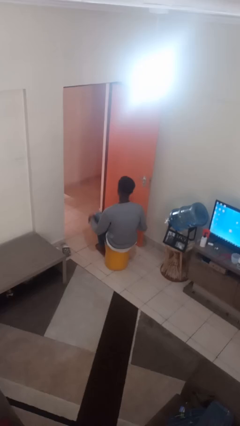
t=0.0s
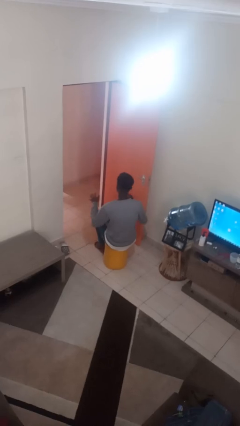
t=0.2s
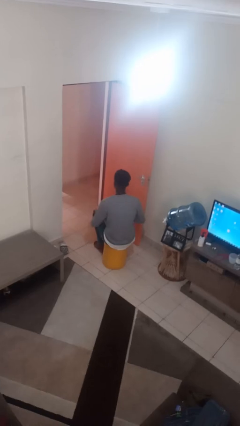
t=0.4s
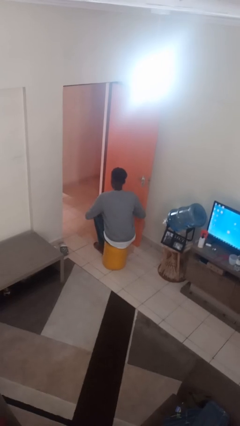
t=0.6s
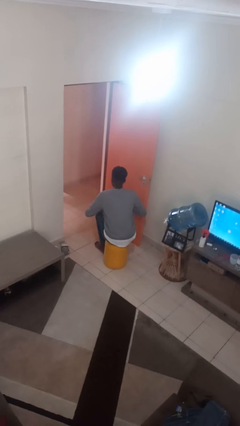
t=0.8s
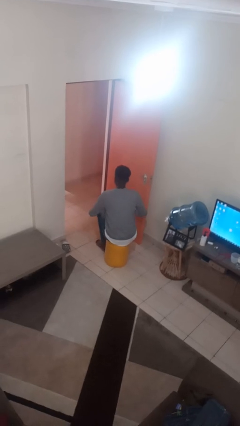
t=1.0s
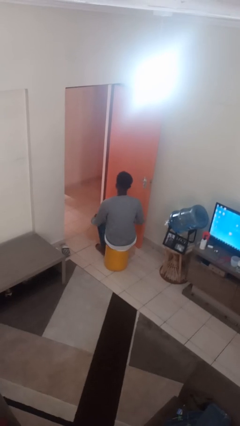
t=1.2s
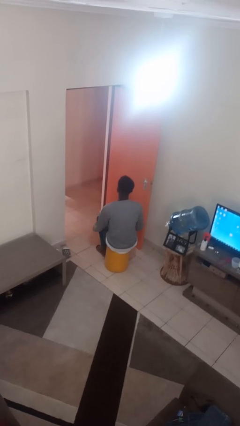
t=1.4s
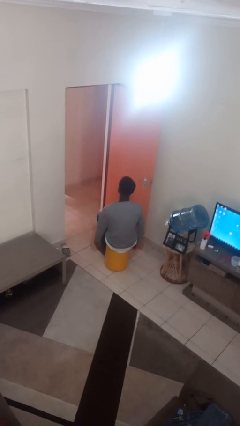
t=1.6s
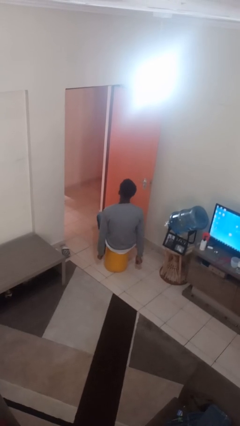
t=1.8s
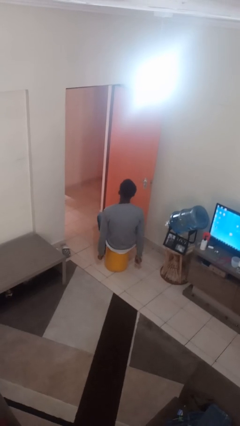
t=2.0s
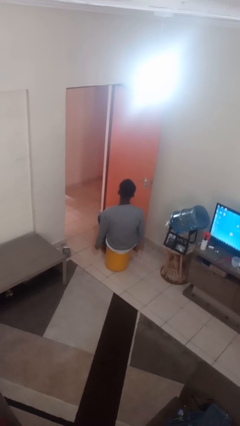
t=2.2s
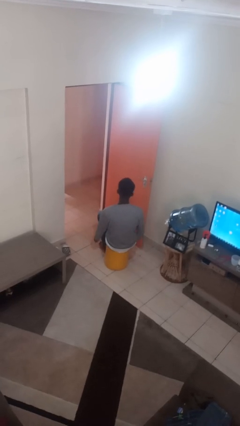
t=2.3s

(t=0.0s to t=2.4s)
person slaps hands on thighs

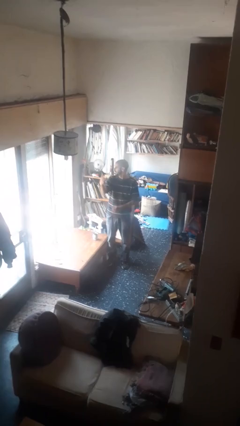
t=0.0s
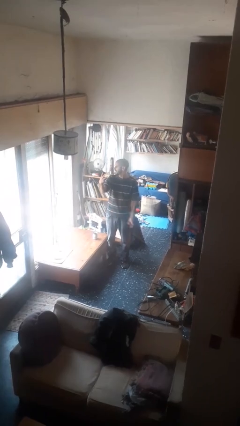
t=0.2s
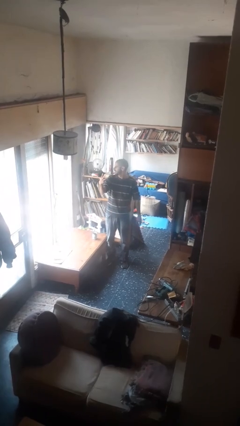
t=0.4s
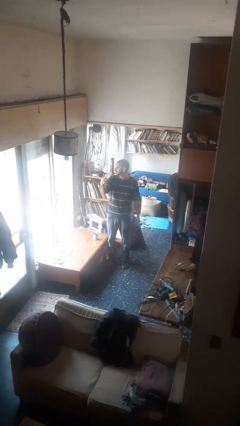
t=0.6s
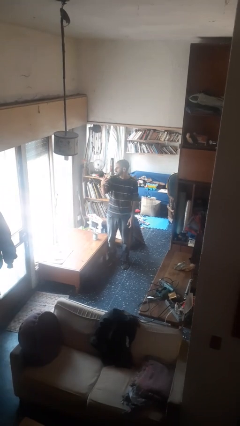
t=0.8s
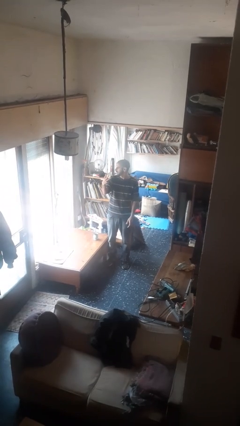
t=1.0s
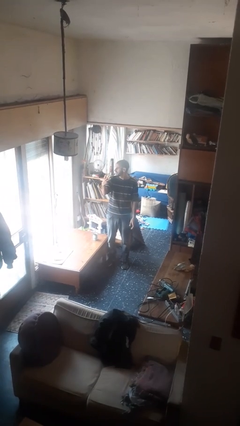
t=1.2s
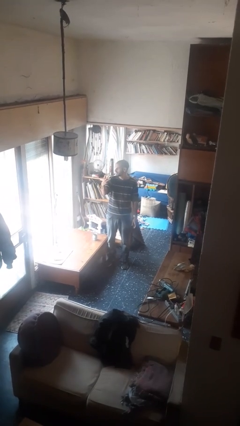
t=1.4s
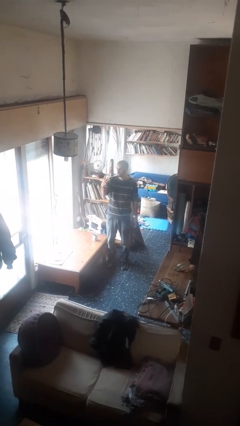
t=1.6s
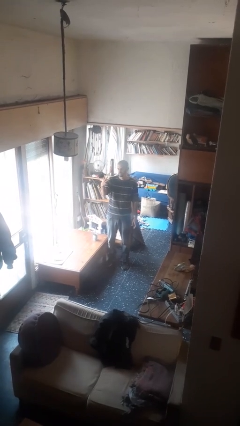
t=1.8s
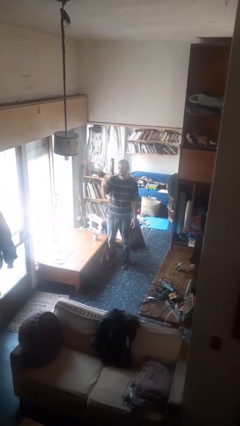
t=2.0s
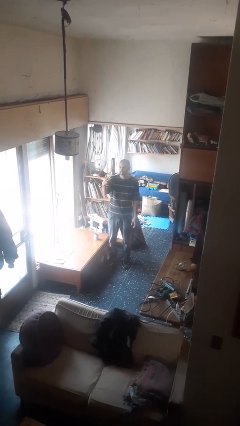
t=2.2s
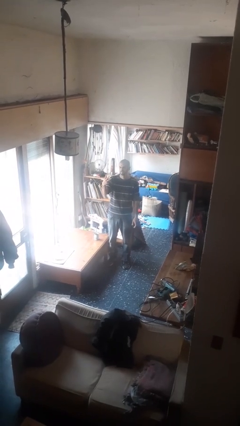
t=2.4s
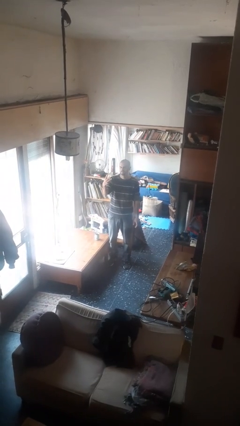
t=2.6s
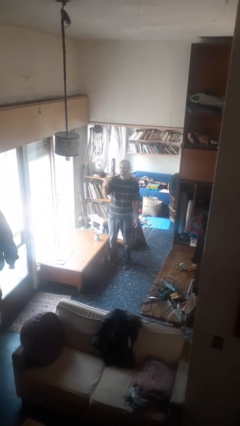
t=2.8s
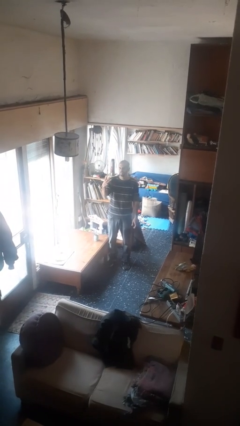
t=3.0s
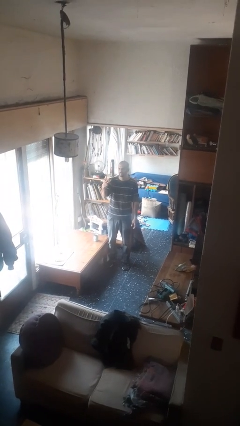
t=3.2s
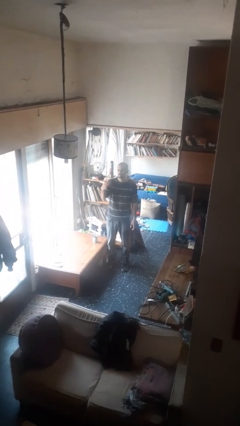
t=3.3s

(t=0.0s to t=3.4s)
person gestures number three

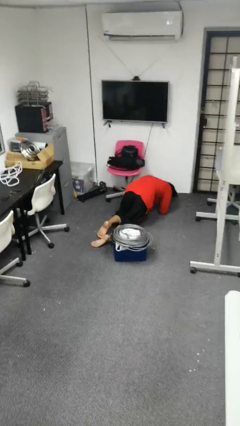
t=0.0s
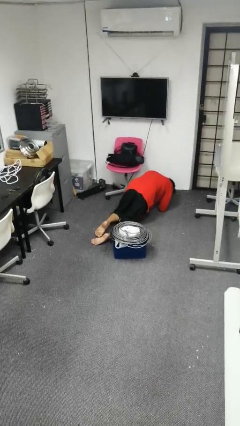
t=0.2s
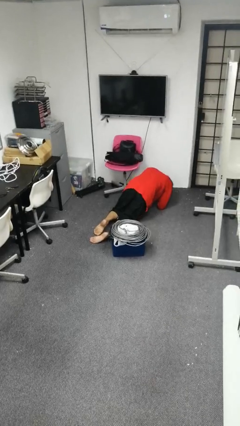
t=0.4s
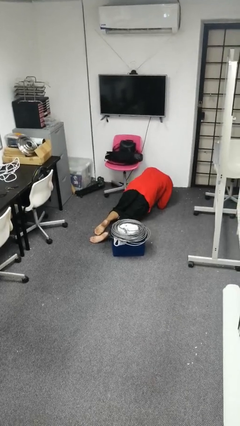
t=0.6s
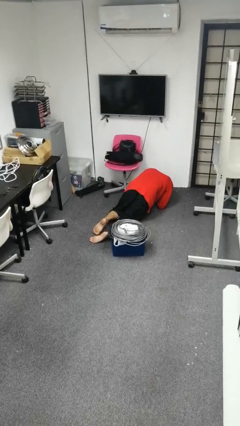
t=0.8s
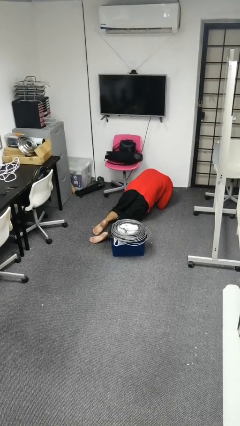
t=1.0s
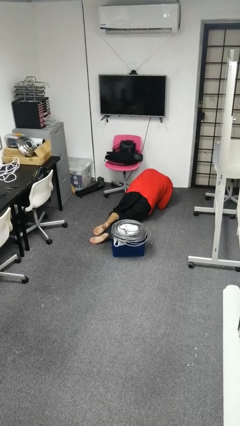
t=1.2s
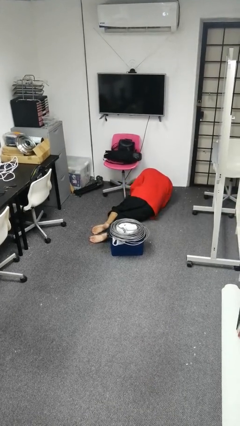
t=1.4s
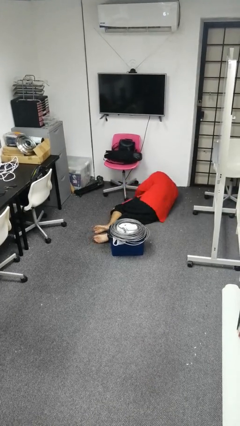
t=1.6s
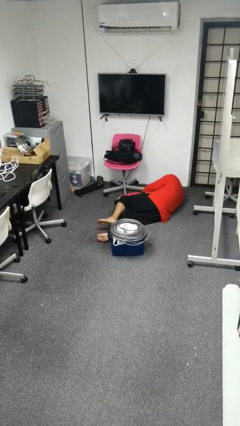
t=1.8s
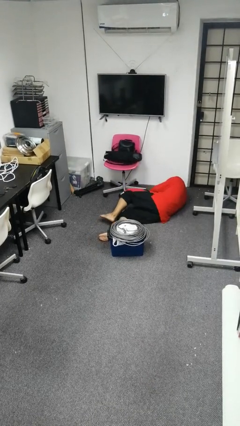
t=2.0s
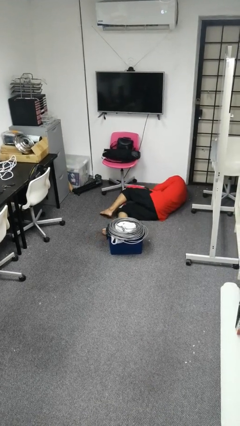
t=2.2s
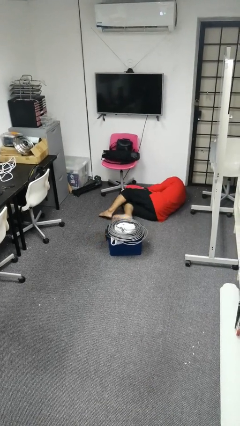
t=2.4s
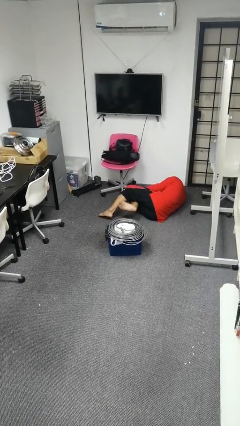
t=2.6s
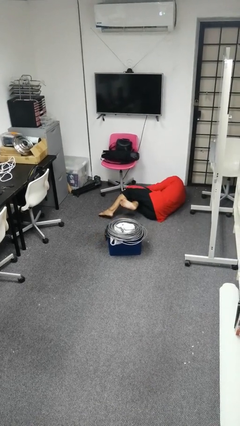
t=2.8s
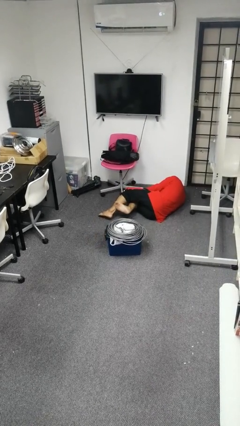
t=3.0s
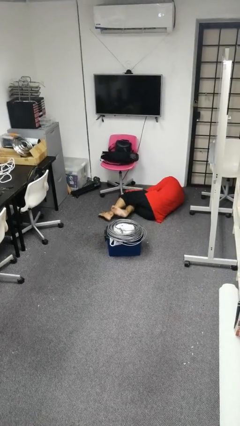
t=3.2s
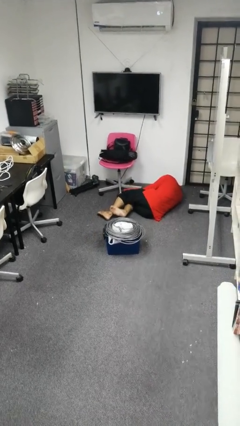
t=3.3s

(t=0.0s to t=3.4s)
person lies down on floor

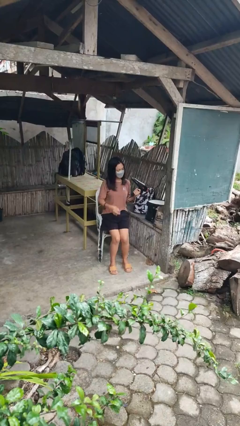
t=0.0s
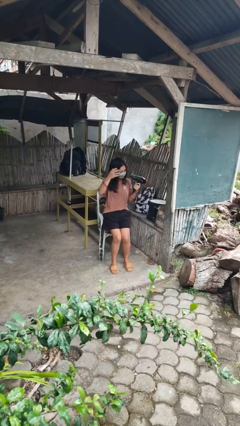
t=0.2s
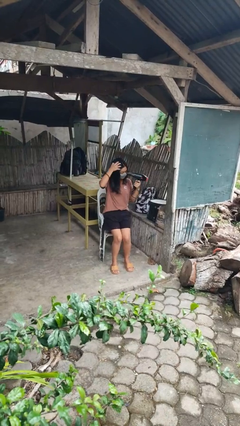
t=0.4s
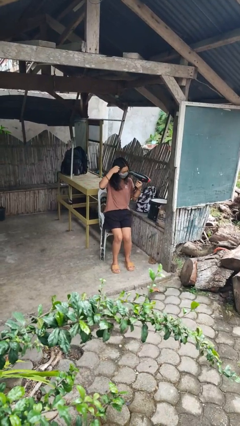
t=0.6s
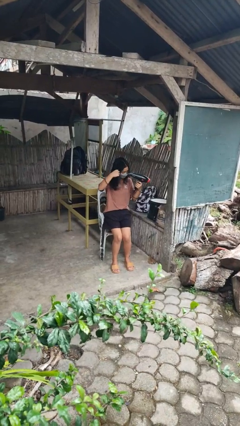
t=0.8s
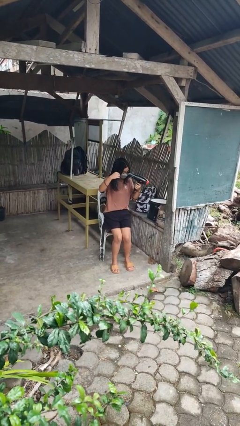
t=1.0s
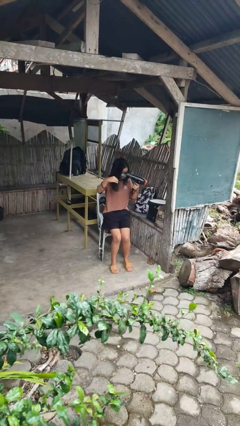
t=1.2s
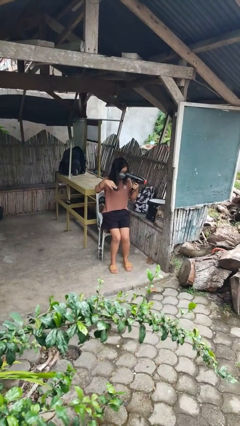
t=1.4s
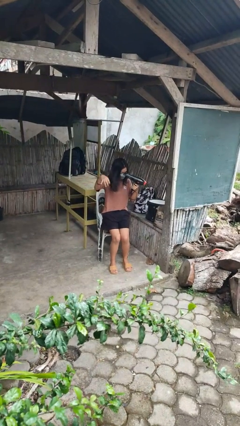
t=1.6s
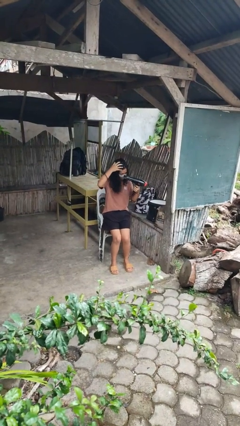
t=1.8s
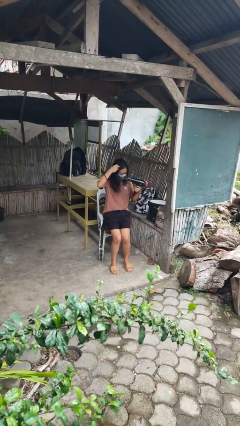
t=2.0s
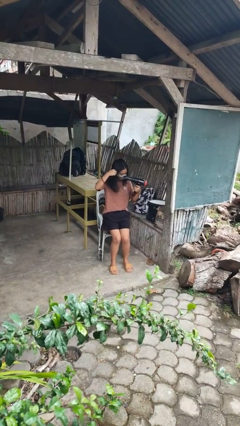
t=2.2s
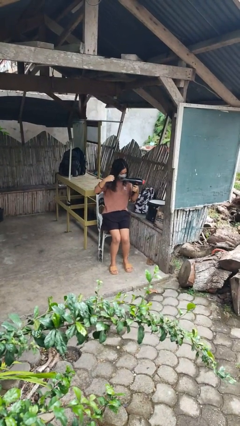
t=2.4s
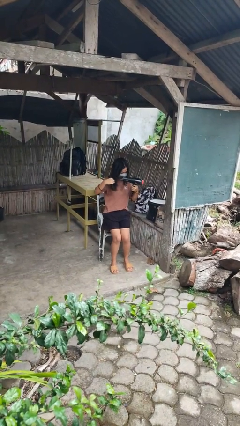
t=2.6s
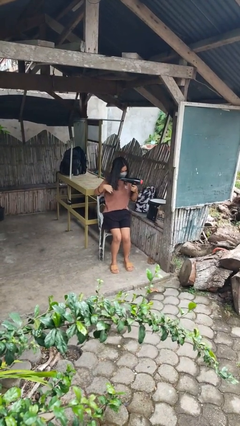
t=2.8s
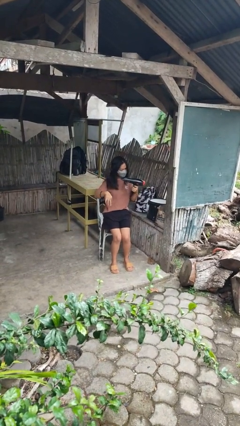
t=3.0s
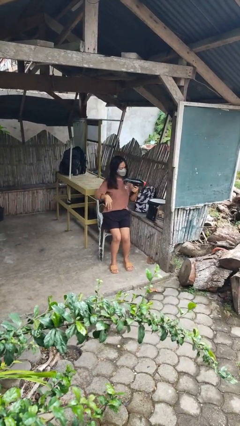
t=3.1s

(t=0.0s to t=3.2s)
person dries hair with hairdryer

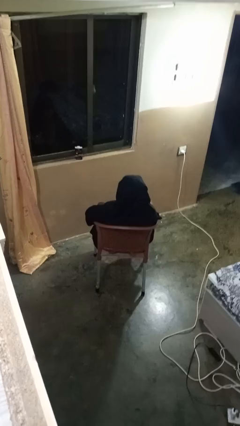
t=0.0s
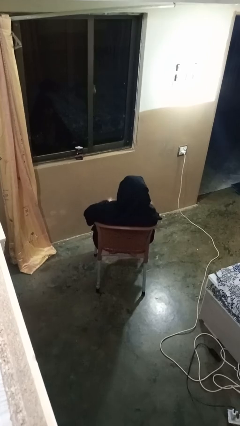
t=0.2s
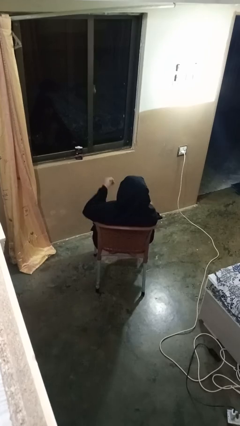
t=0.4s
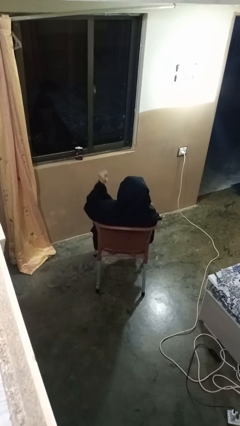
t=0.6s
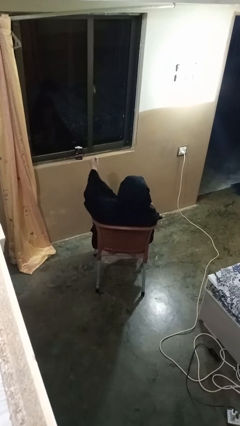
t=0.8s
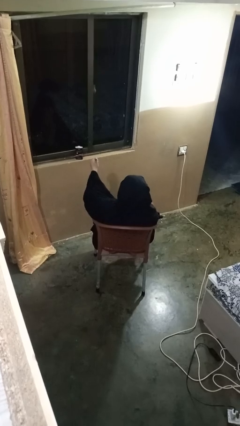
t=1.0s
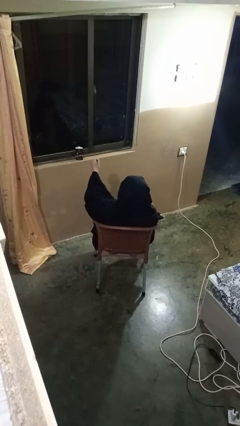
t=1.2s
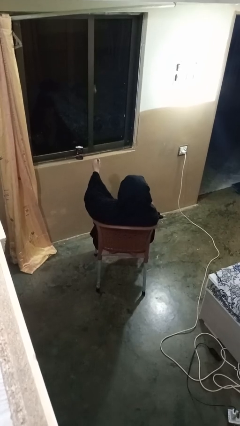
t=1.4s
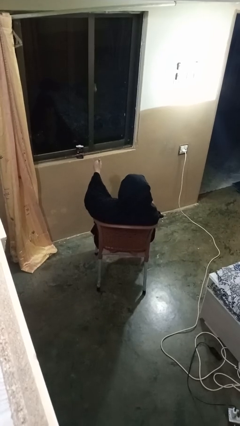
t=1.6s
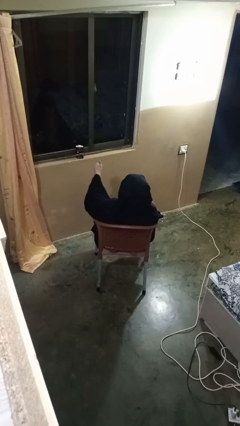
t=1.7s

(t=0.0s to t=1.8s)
person gestures thumbs up

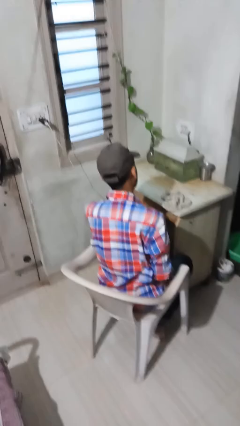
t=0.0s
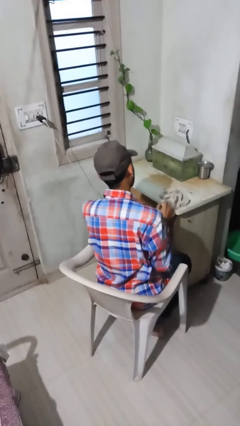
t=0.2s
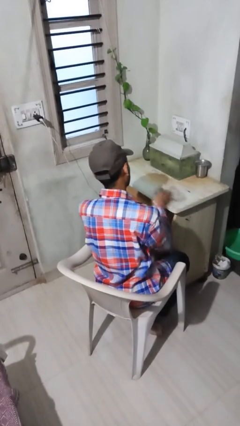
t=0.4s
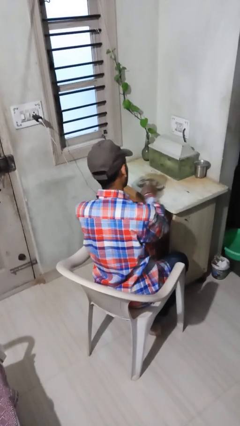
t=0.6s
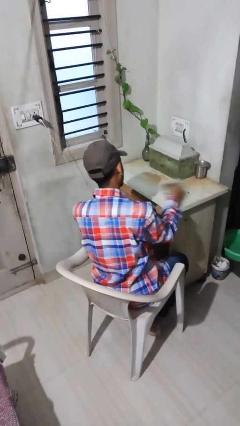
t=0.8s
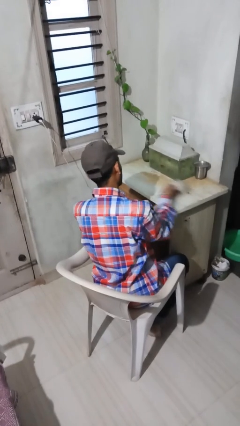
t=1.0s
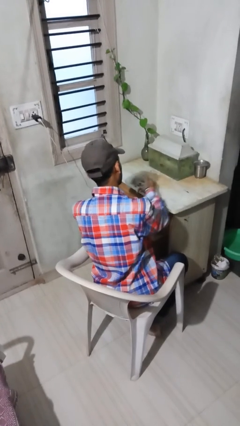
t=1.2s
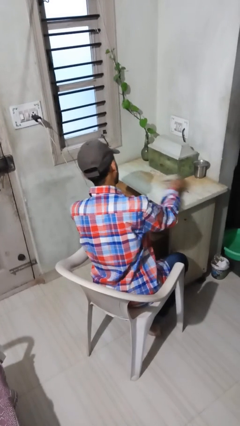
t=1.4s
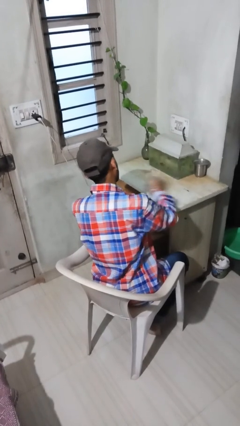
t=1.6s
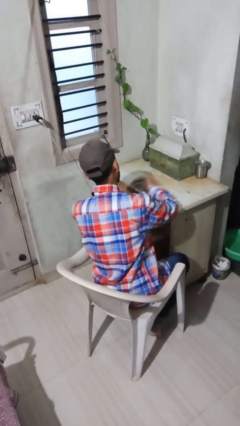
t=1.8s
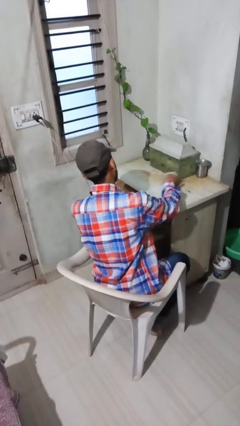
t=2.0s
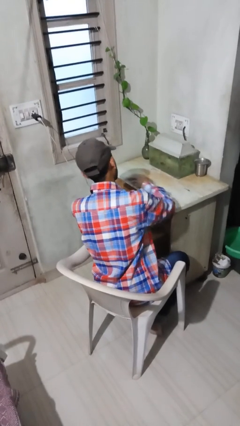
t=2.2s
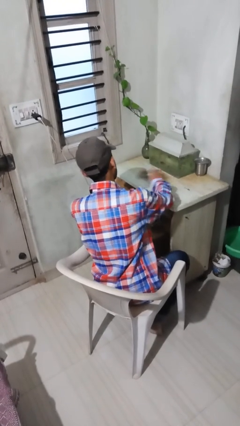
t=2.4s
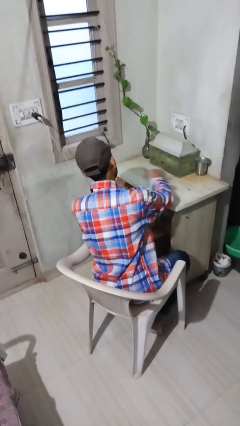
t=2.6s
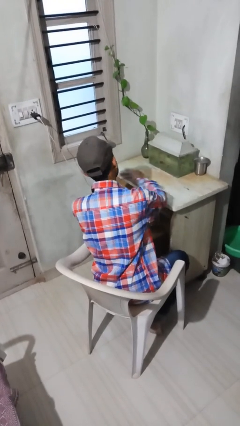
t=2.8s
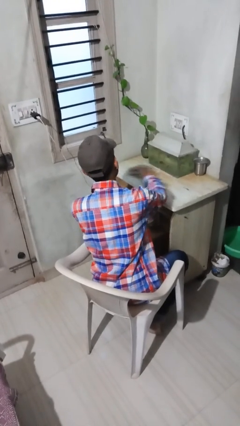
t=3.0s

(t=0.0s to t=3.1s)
person cleans table with rag
